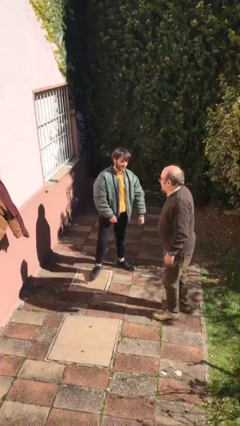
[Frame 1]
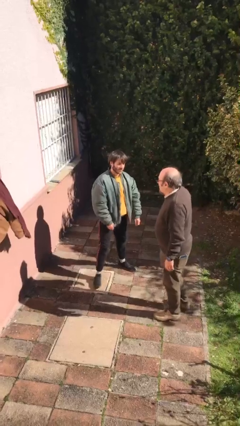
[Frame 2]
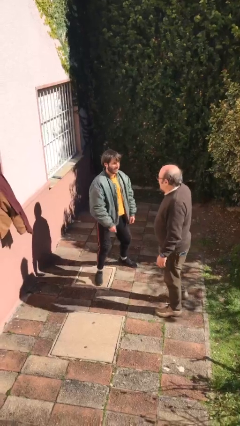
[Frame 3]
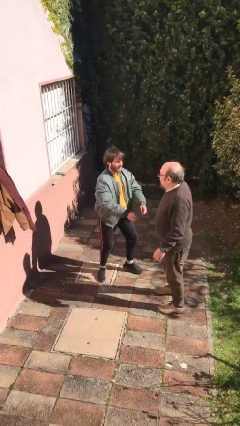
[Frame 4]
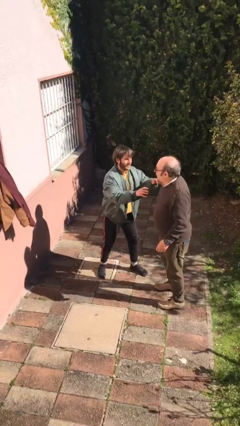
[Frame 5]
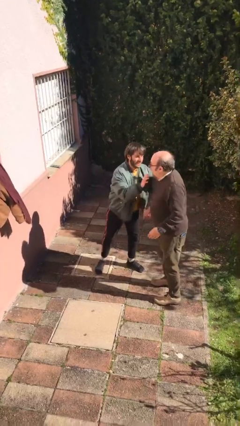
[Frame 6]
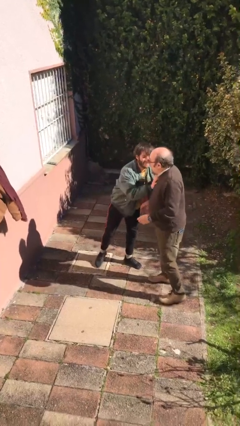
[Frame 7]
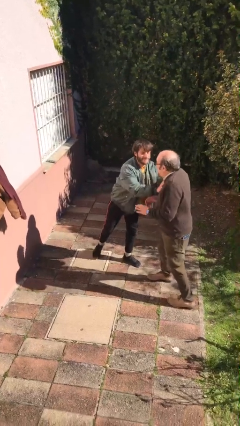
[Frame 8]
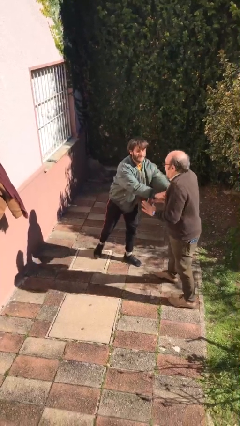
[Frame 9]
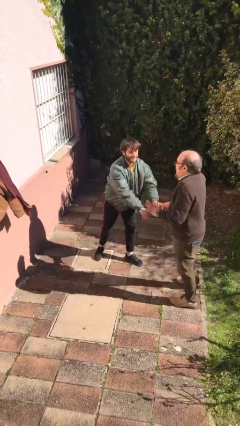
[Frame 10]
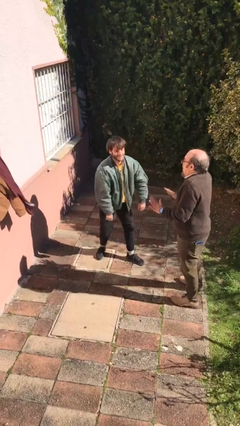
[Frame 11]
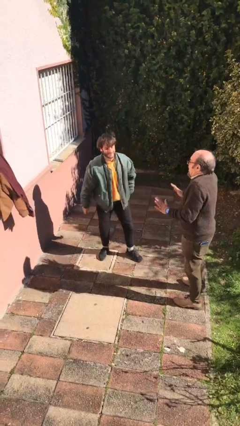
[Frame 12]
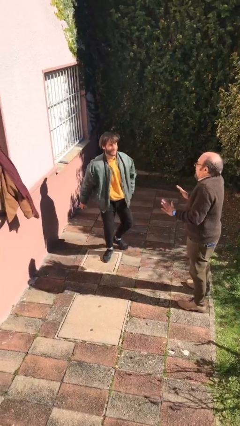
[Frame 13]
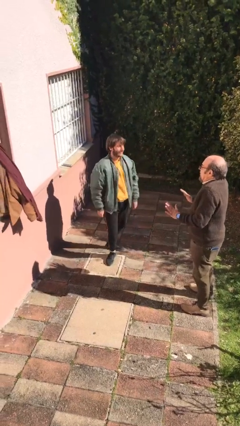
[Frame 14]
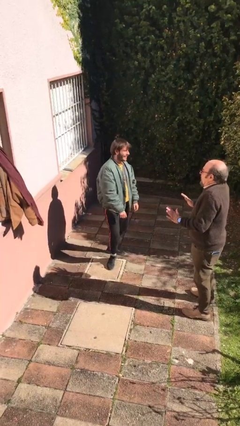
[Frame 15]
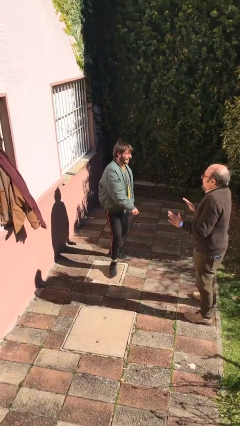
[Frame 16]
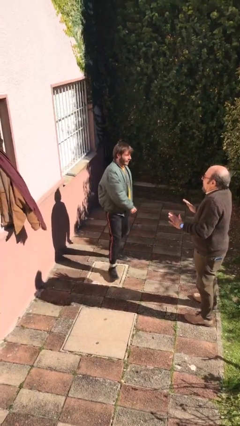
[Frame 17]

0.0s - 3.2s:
person shoves person

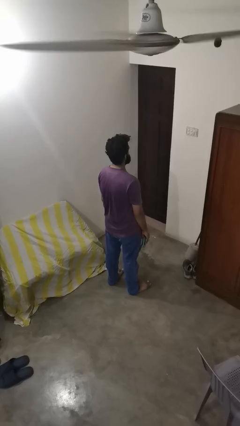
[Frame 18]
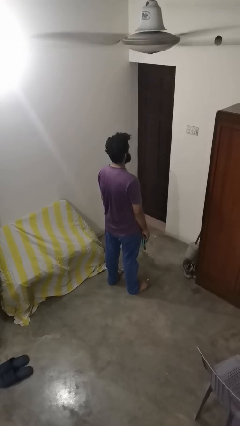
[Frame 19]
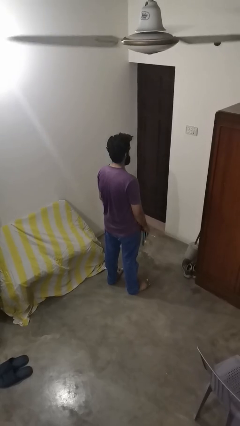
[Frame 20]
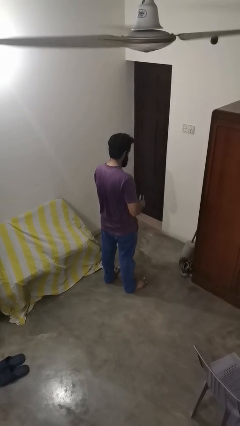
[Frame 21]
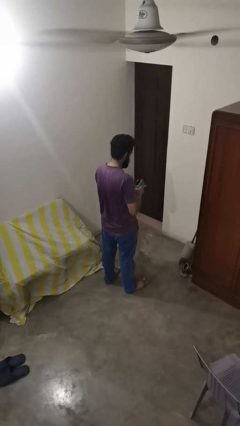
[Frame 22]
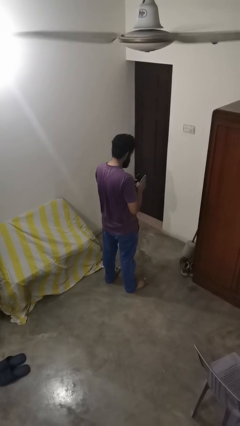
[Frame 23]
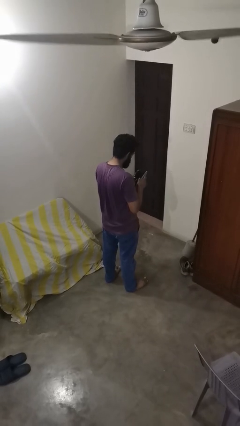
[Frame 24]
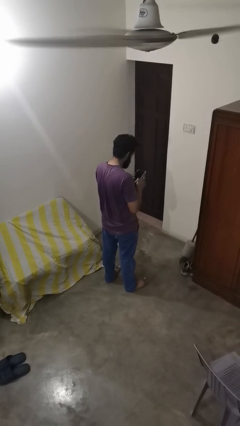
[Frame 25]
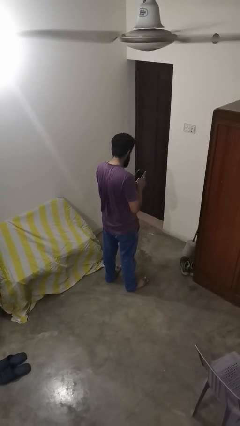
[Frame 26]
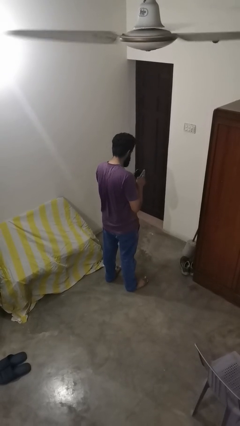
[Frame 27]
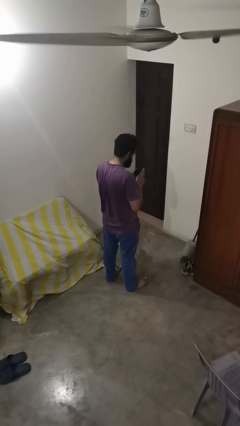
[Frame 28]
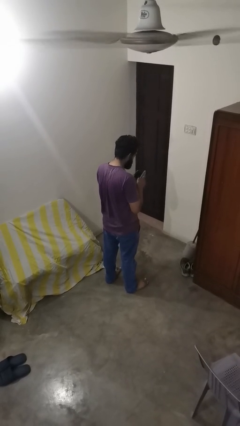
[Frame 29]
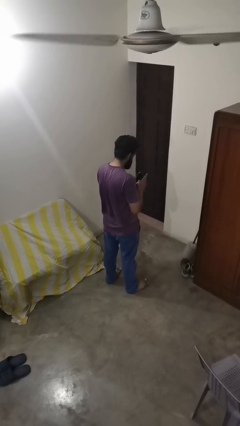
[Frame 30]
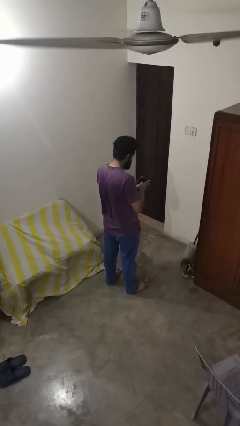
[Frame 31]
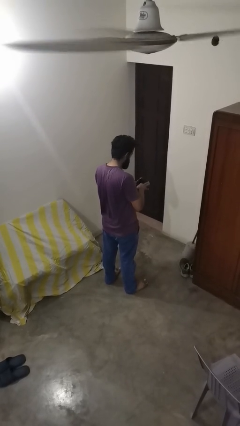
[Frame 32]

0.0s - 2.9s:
person searches in purse

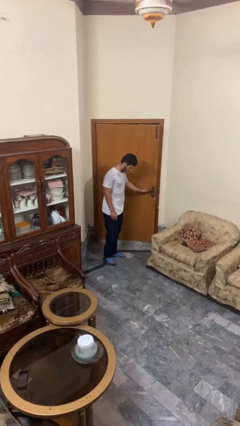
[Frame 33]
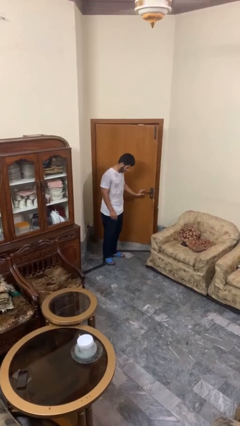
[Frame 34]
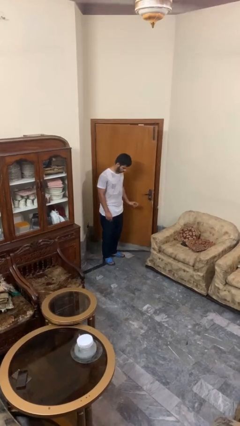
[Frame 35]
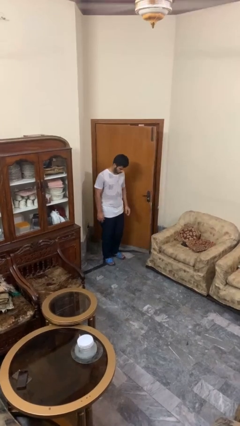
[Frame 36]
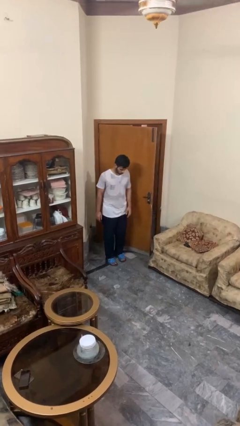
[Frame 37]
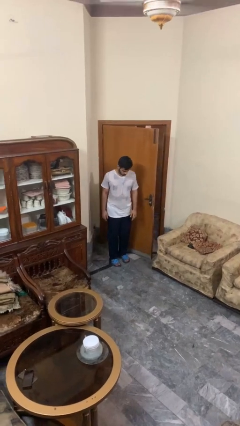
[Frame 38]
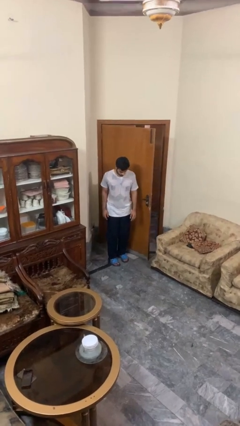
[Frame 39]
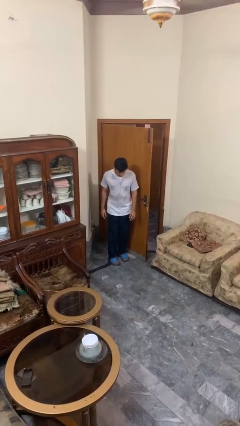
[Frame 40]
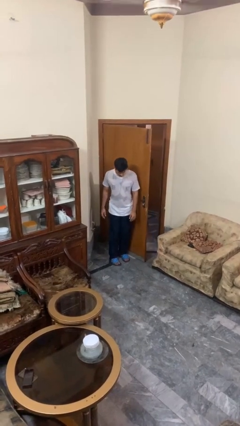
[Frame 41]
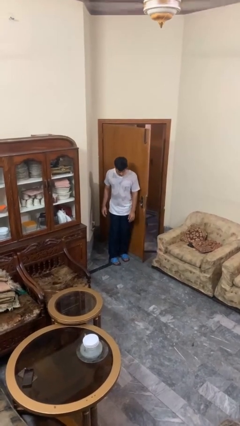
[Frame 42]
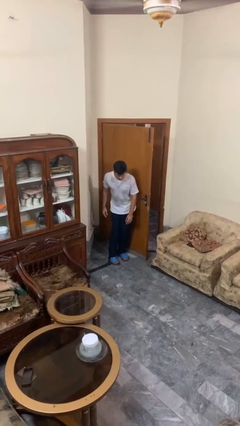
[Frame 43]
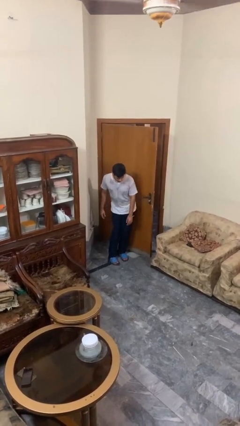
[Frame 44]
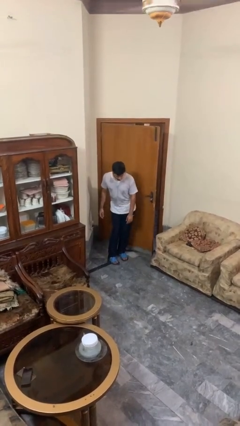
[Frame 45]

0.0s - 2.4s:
person opens facility door

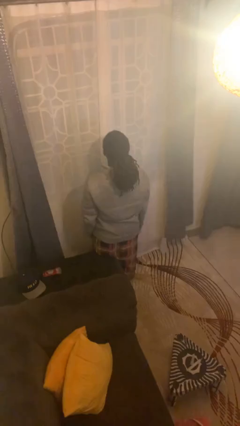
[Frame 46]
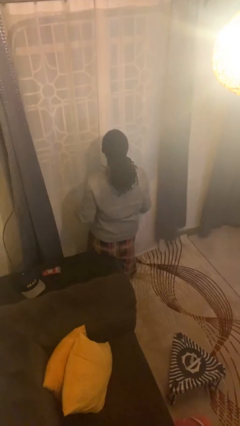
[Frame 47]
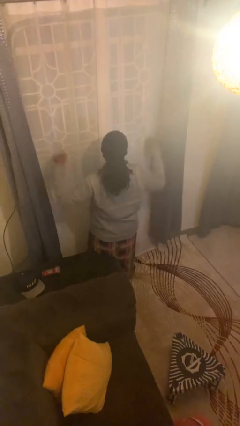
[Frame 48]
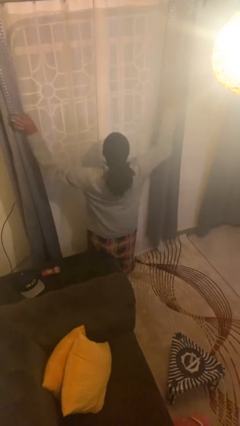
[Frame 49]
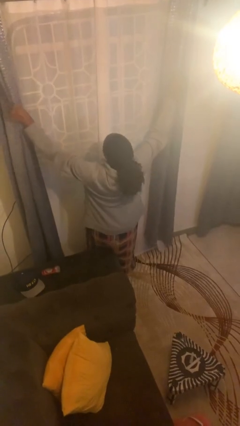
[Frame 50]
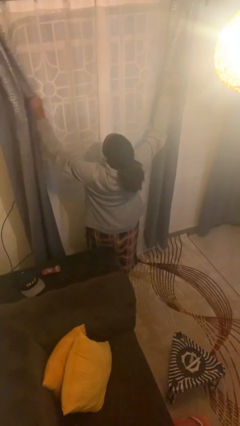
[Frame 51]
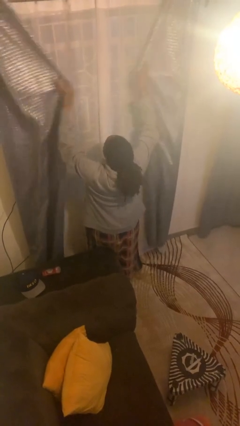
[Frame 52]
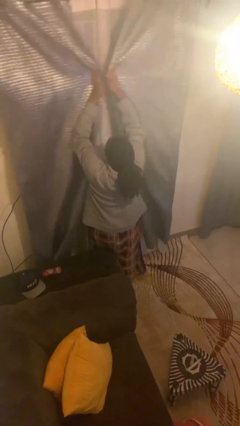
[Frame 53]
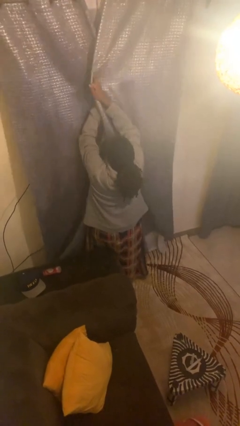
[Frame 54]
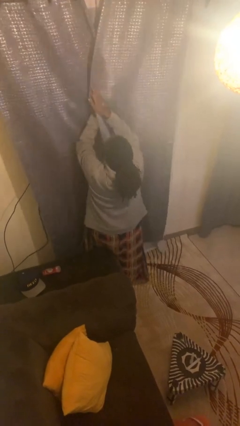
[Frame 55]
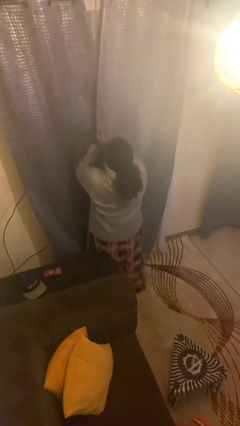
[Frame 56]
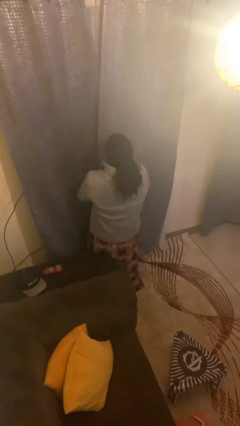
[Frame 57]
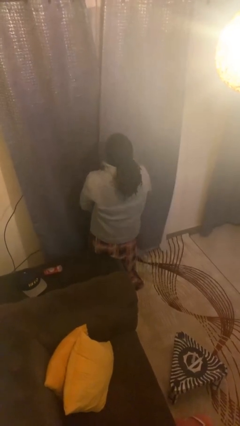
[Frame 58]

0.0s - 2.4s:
person closes curtains

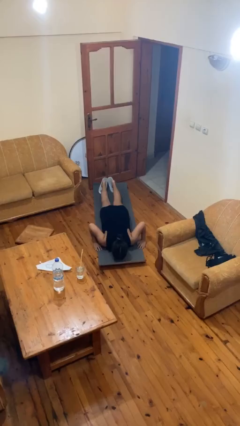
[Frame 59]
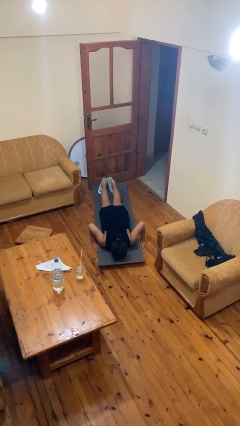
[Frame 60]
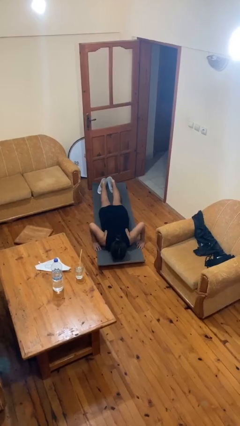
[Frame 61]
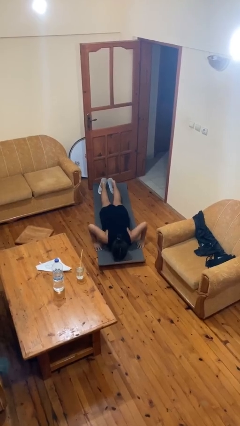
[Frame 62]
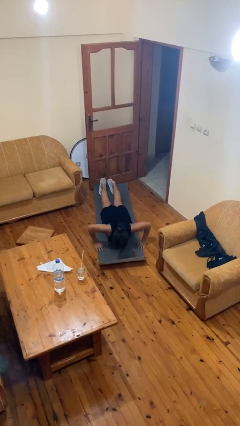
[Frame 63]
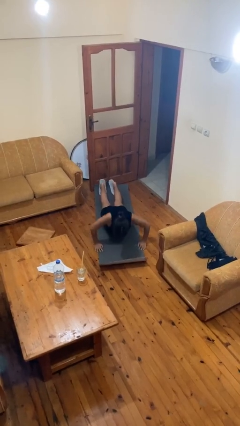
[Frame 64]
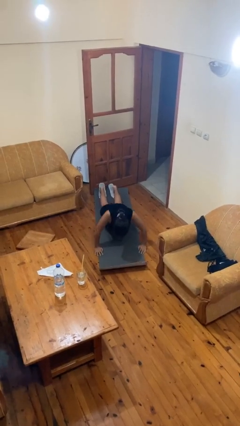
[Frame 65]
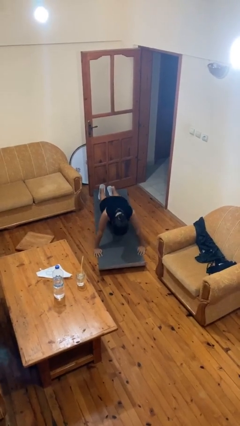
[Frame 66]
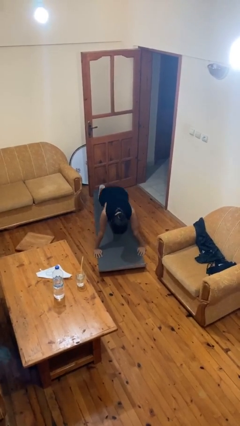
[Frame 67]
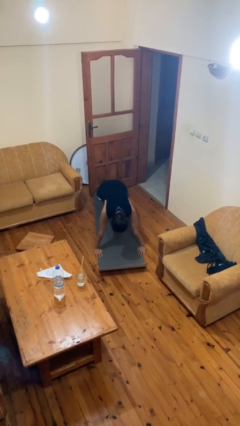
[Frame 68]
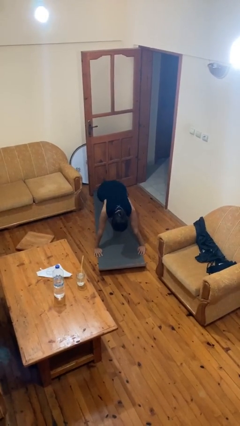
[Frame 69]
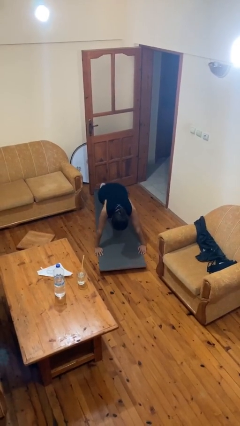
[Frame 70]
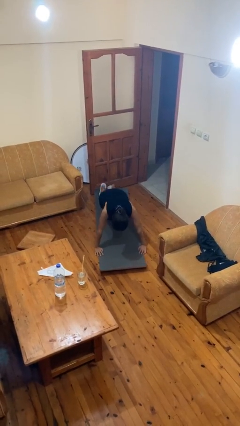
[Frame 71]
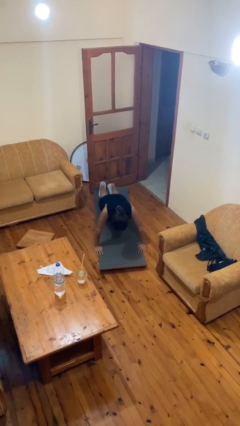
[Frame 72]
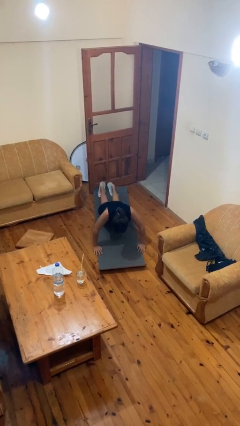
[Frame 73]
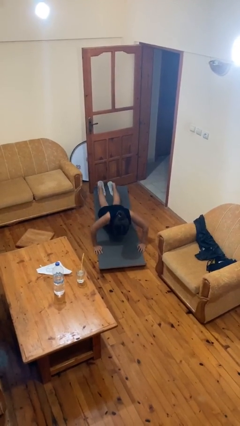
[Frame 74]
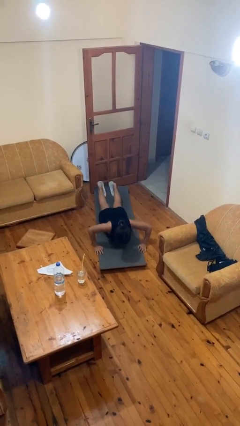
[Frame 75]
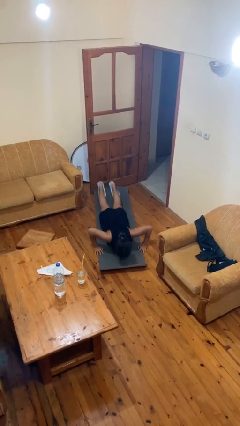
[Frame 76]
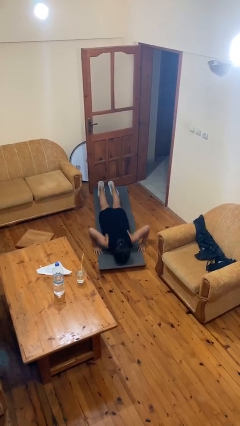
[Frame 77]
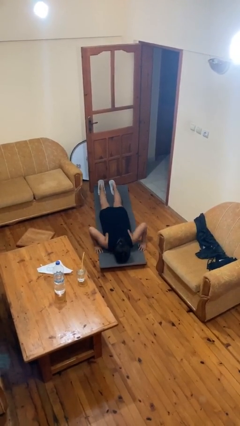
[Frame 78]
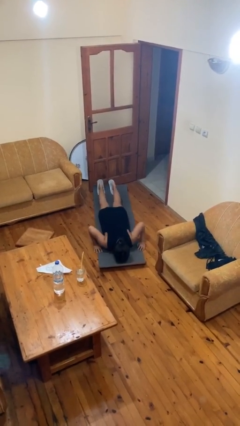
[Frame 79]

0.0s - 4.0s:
person exercises with pushup

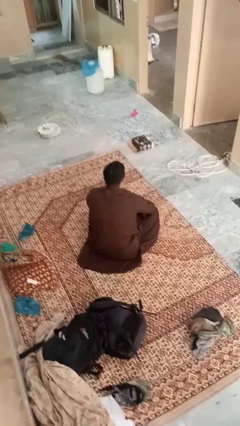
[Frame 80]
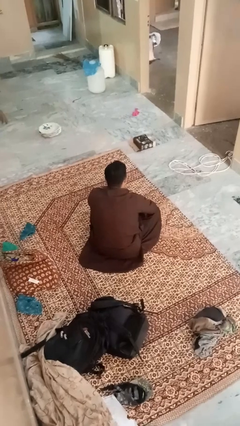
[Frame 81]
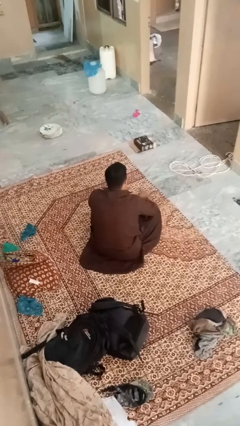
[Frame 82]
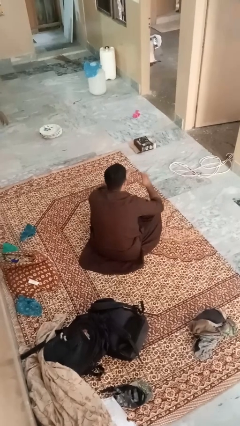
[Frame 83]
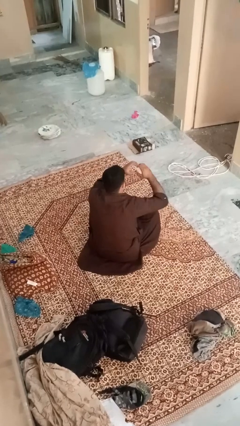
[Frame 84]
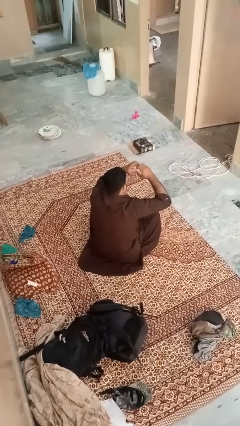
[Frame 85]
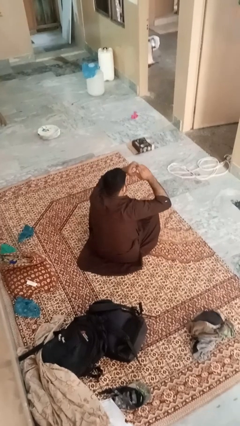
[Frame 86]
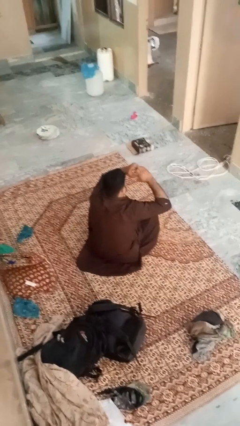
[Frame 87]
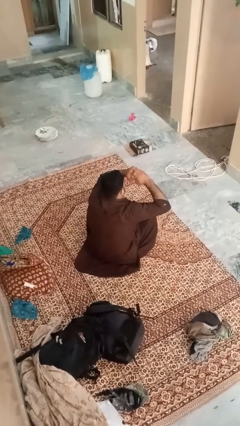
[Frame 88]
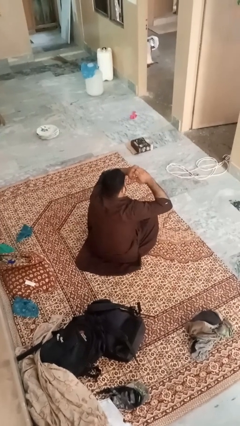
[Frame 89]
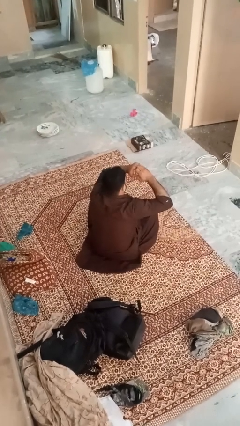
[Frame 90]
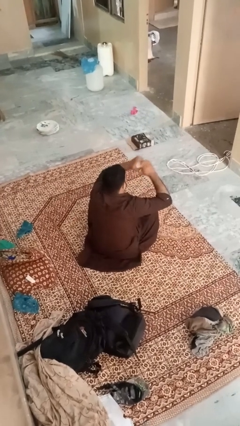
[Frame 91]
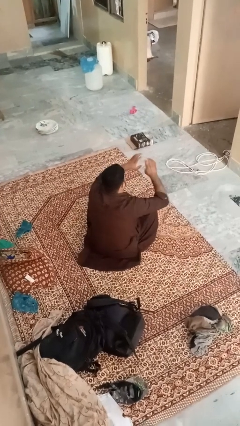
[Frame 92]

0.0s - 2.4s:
person gestures heart
